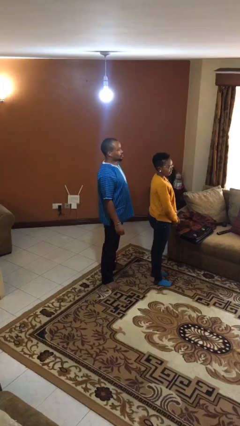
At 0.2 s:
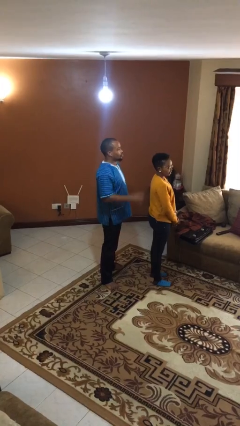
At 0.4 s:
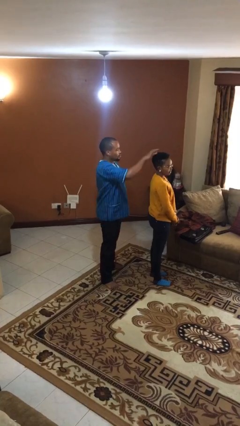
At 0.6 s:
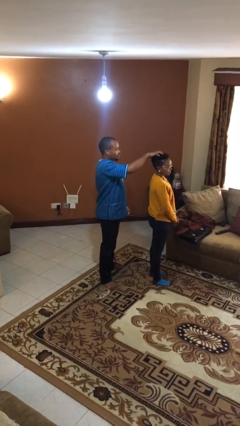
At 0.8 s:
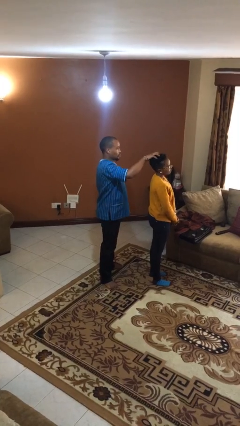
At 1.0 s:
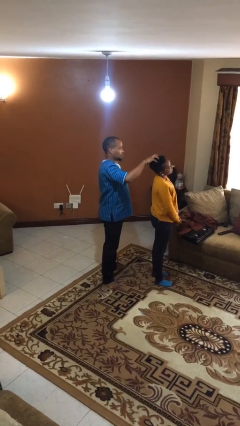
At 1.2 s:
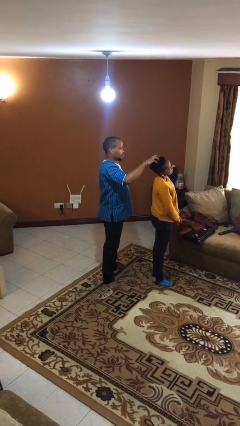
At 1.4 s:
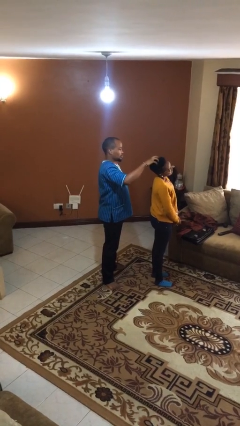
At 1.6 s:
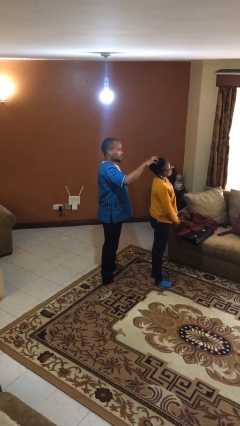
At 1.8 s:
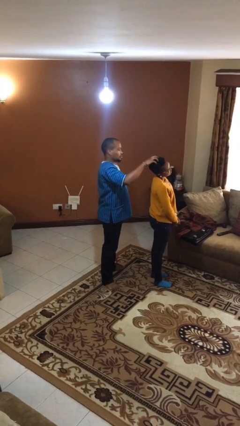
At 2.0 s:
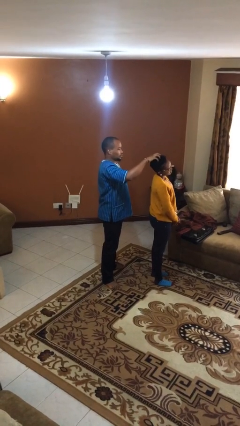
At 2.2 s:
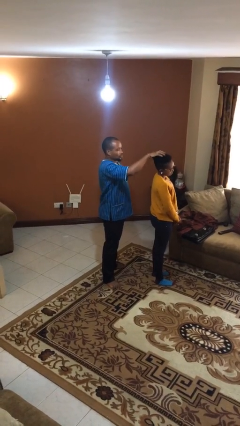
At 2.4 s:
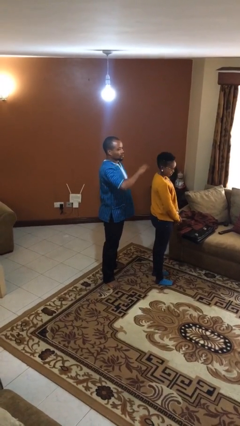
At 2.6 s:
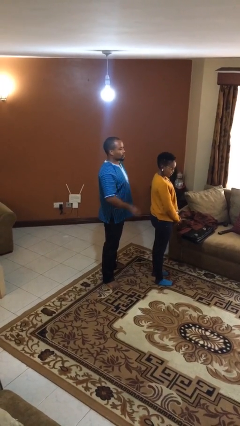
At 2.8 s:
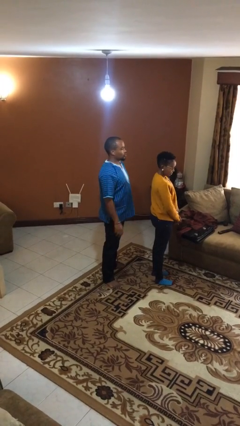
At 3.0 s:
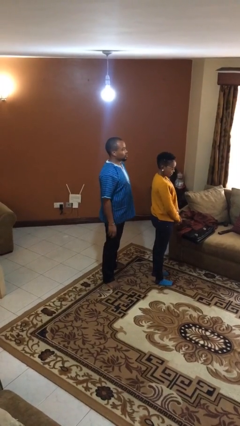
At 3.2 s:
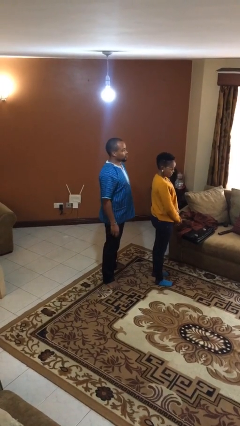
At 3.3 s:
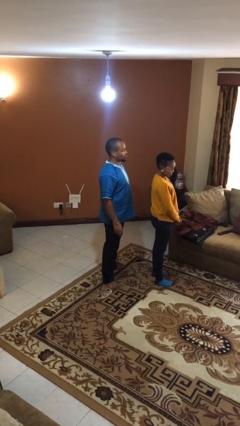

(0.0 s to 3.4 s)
person grabs person by hair

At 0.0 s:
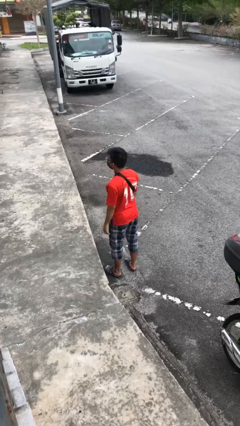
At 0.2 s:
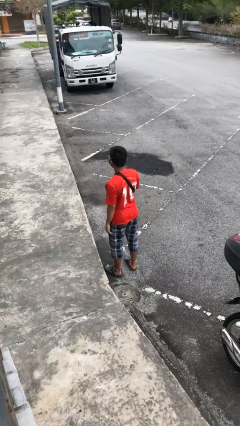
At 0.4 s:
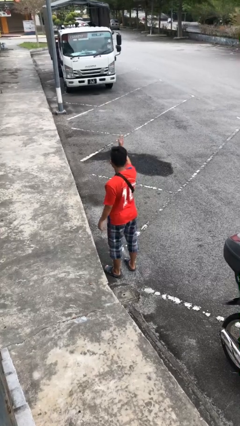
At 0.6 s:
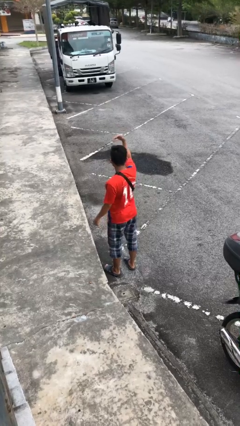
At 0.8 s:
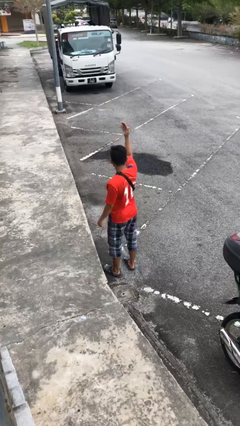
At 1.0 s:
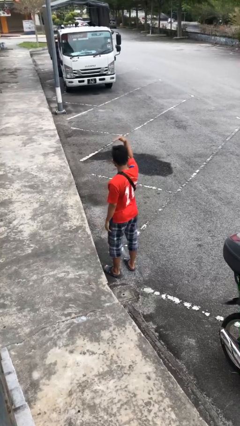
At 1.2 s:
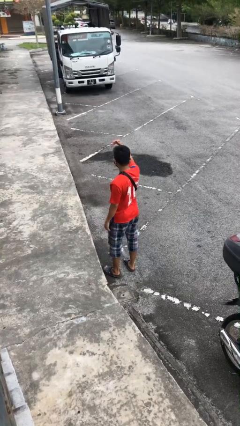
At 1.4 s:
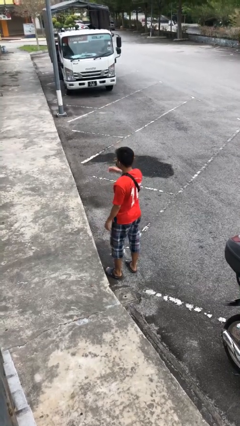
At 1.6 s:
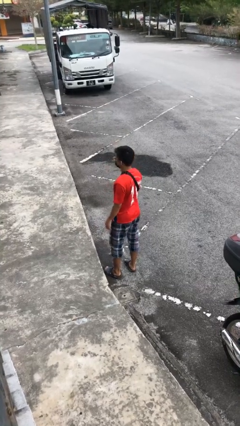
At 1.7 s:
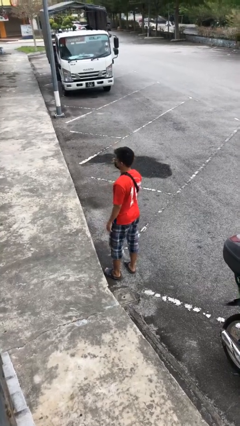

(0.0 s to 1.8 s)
person gestures come here

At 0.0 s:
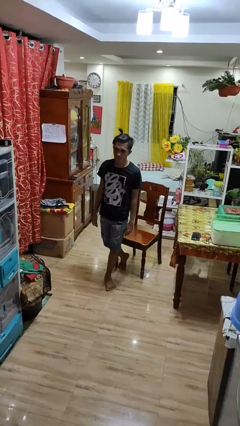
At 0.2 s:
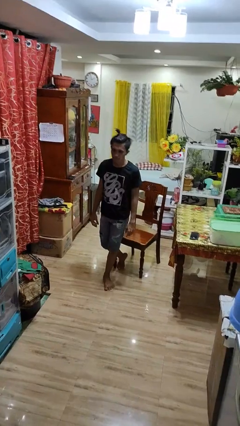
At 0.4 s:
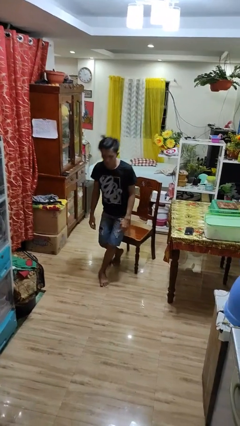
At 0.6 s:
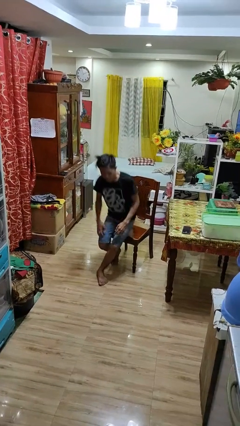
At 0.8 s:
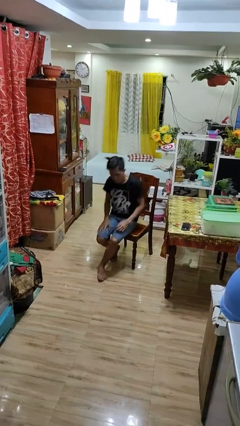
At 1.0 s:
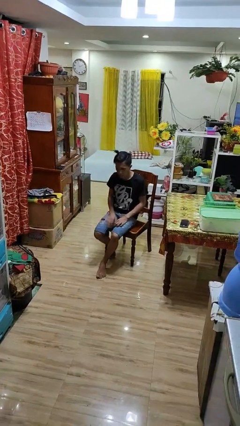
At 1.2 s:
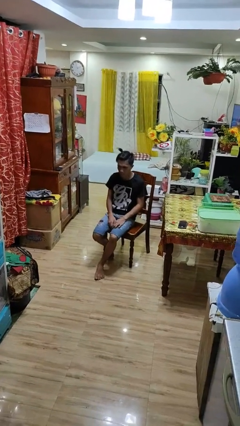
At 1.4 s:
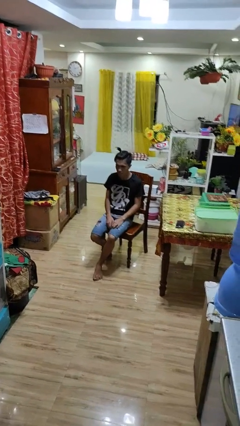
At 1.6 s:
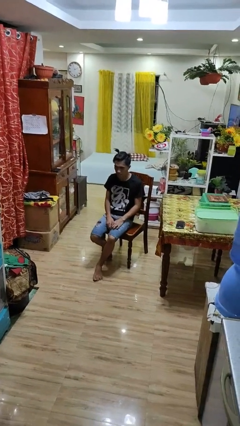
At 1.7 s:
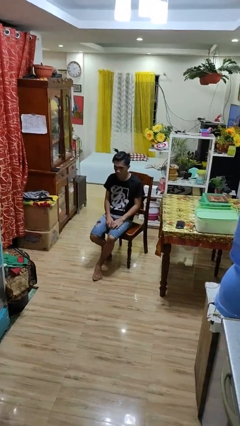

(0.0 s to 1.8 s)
person sits down

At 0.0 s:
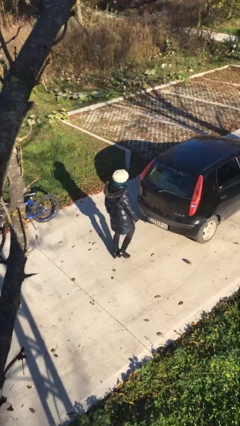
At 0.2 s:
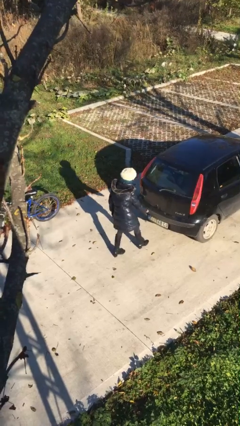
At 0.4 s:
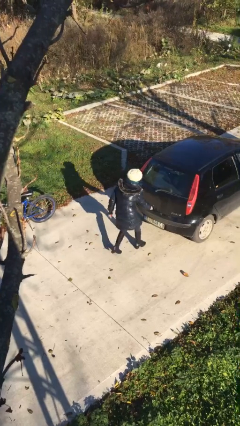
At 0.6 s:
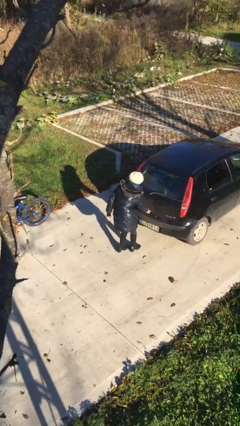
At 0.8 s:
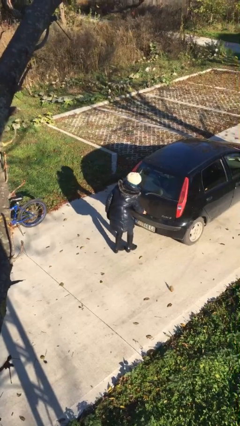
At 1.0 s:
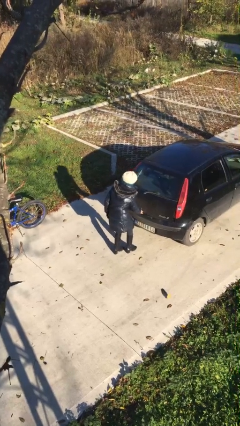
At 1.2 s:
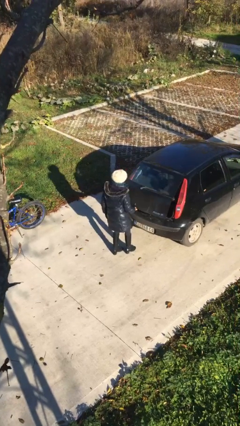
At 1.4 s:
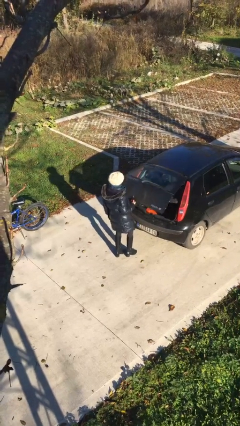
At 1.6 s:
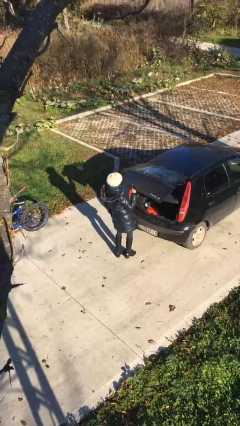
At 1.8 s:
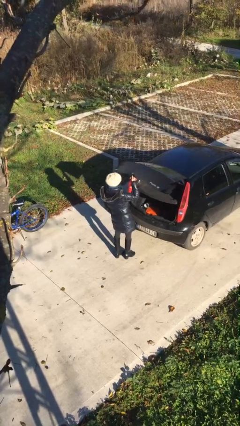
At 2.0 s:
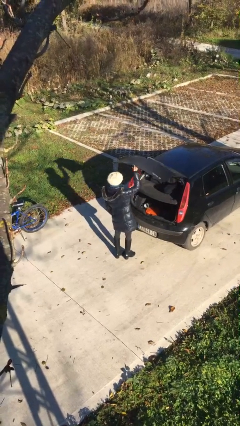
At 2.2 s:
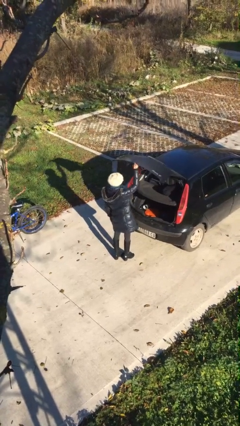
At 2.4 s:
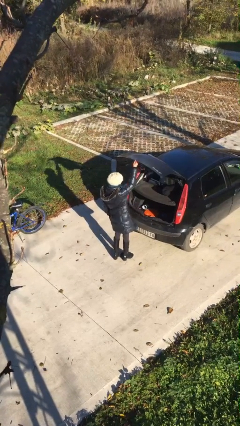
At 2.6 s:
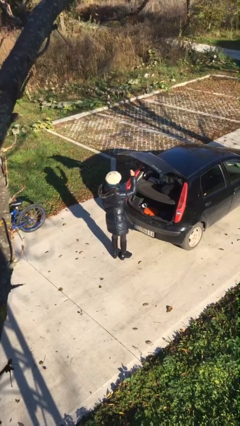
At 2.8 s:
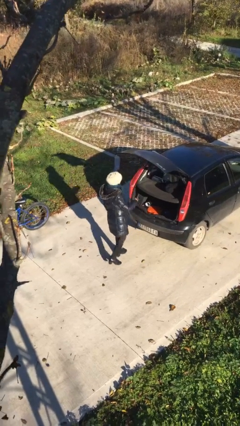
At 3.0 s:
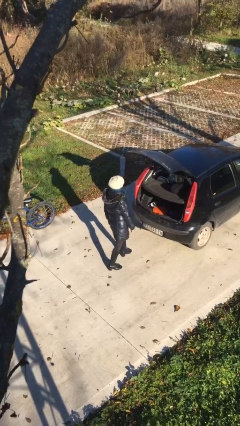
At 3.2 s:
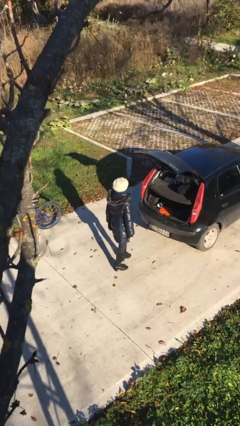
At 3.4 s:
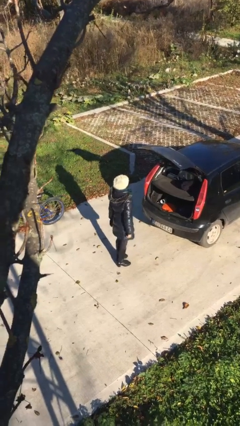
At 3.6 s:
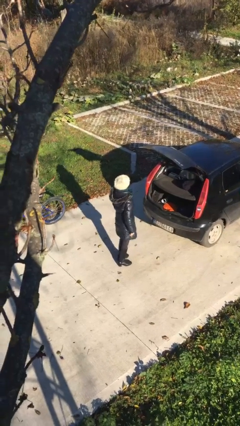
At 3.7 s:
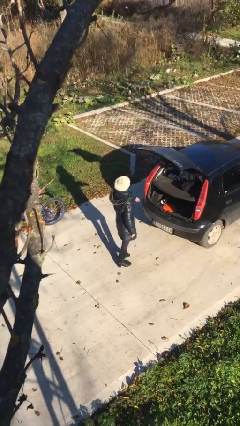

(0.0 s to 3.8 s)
person opens car trunk

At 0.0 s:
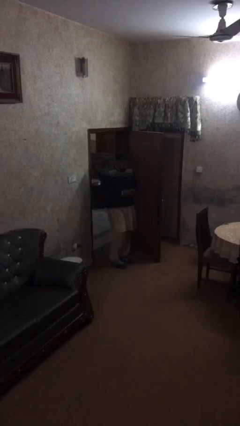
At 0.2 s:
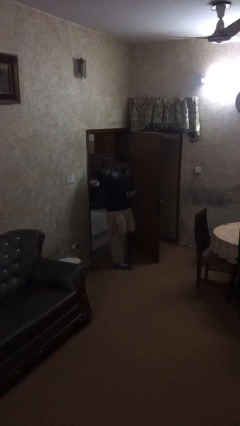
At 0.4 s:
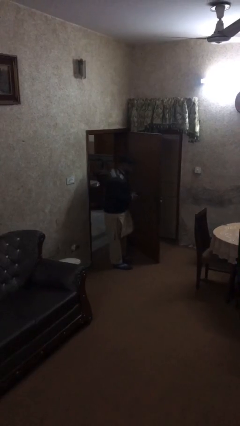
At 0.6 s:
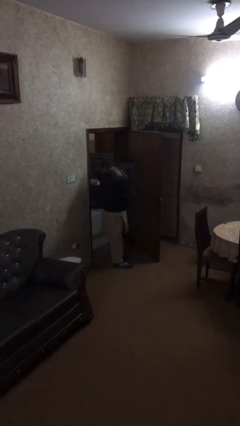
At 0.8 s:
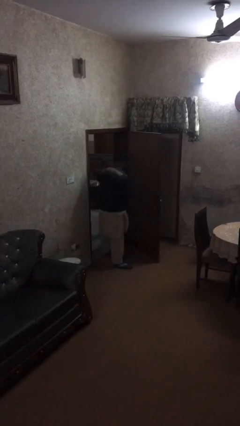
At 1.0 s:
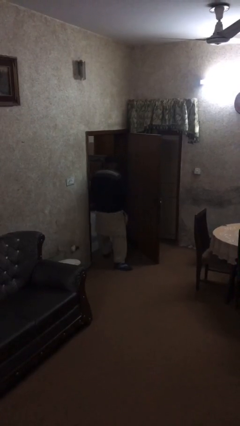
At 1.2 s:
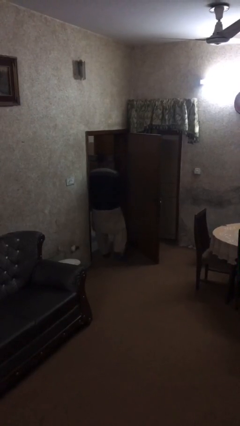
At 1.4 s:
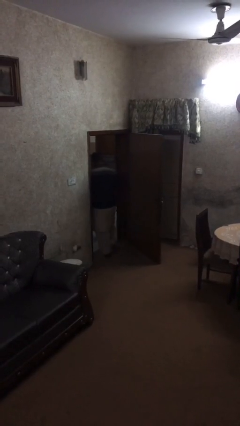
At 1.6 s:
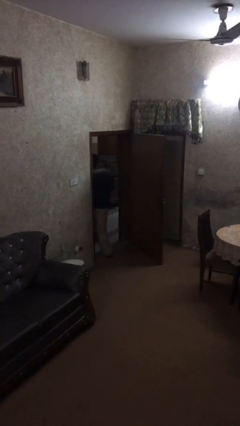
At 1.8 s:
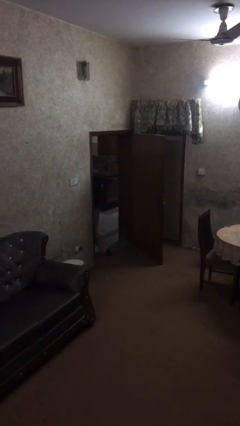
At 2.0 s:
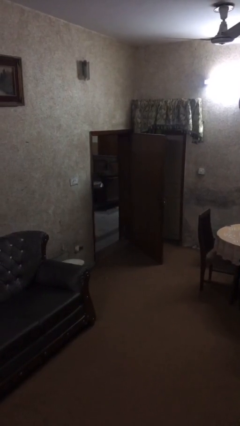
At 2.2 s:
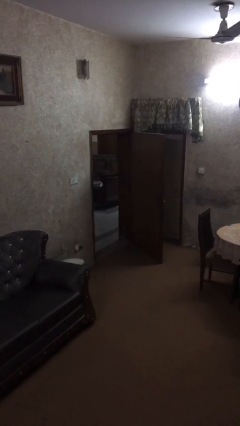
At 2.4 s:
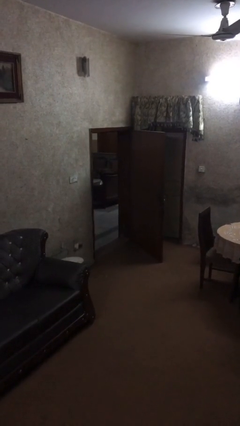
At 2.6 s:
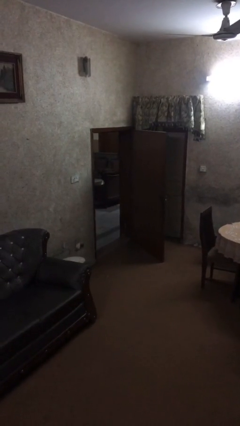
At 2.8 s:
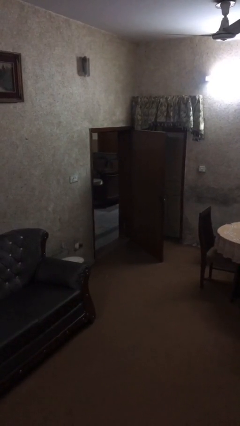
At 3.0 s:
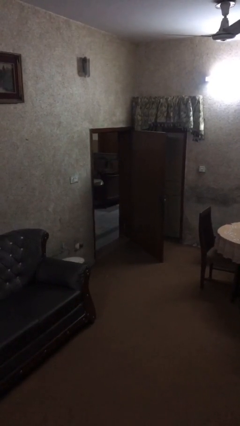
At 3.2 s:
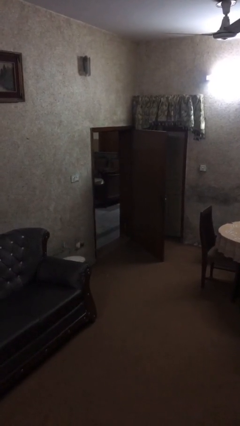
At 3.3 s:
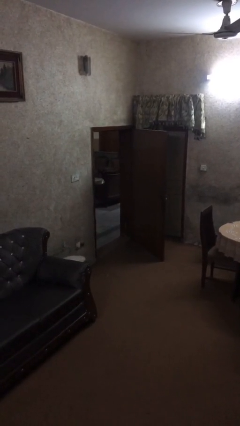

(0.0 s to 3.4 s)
person exits scene through structure

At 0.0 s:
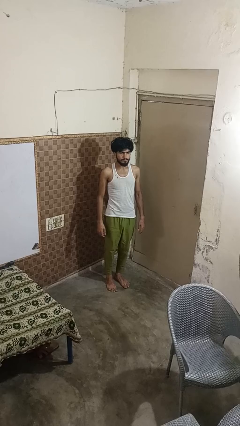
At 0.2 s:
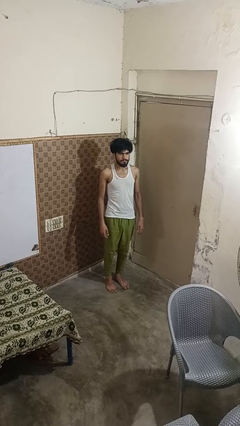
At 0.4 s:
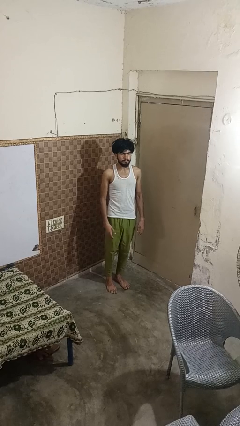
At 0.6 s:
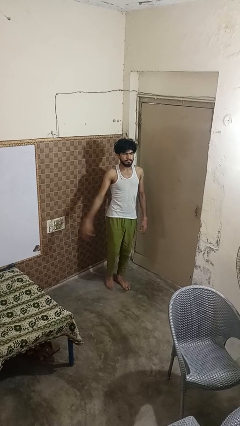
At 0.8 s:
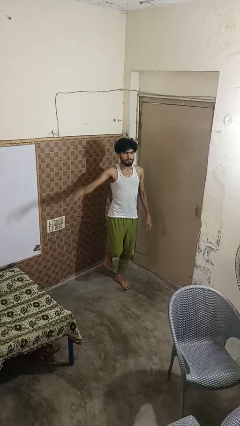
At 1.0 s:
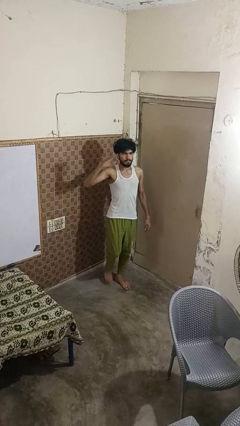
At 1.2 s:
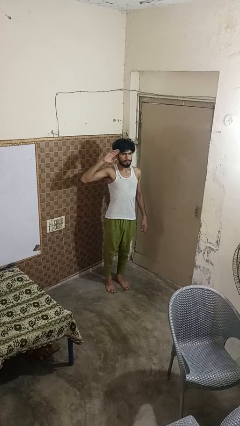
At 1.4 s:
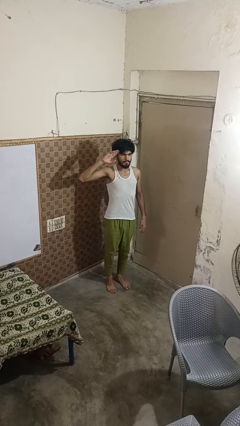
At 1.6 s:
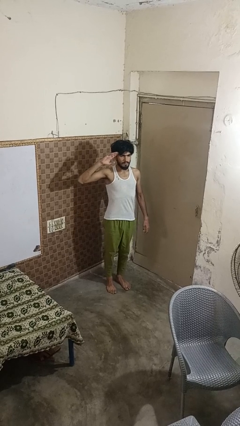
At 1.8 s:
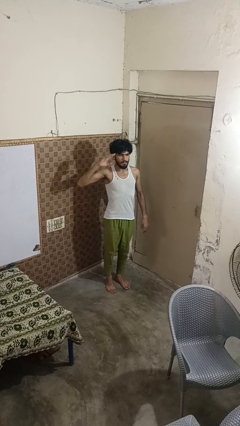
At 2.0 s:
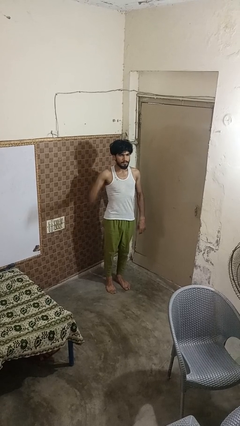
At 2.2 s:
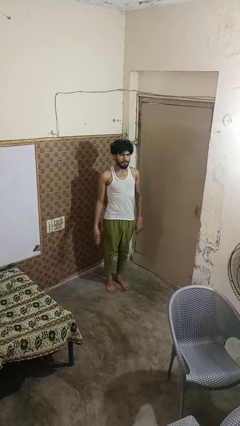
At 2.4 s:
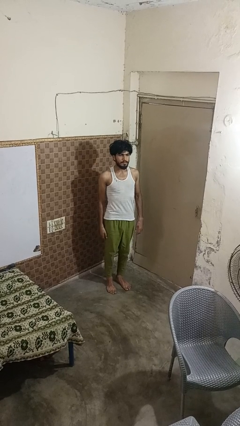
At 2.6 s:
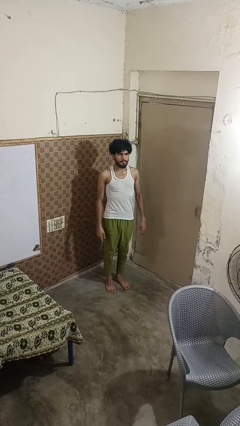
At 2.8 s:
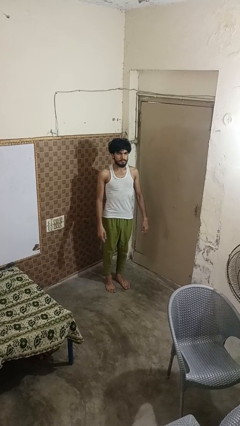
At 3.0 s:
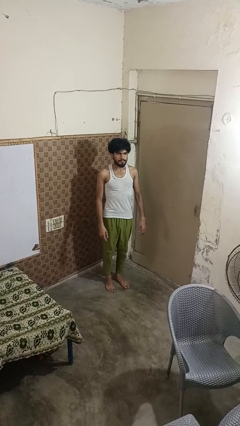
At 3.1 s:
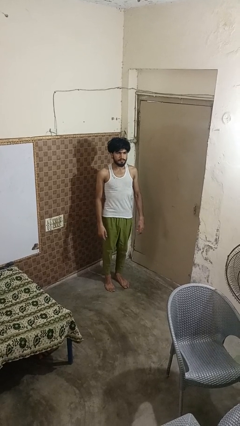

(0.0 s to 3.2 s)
person salutes
